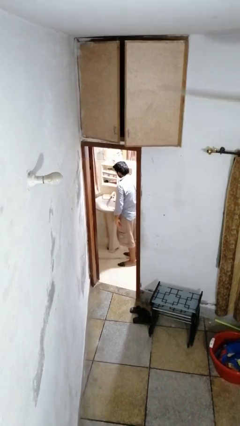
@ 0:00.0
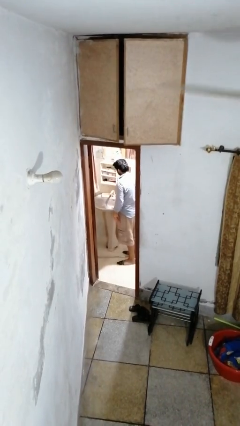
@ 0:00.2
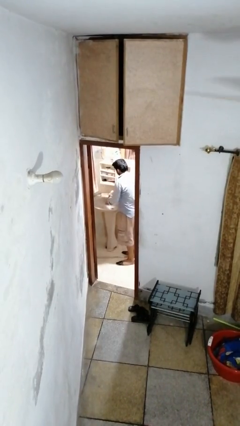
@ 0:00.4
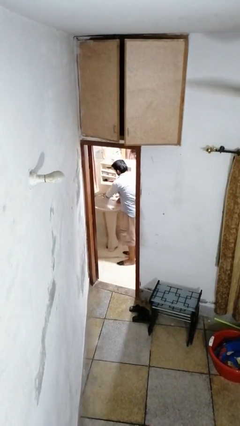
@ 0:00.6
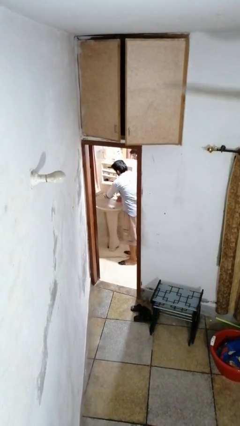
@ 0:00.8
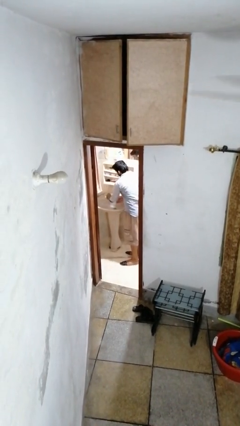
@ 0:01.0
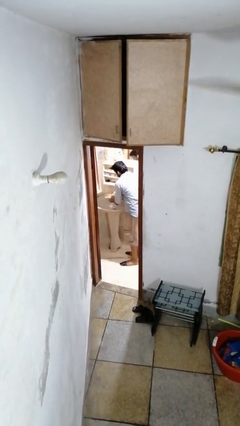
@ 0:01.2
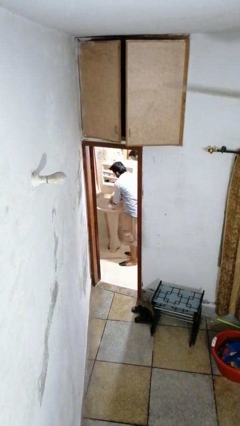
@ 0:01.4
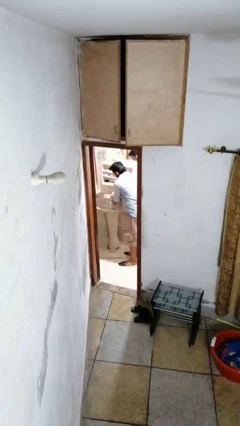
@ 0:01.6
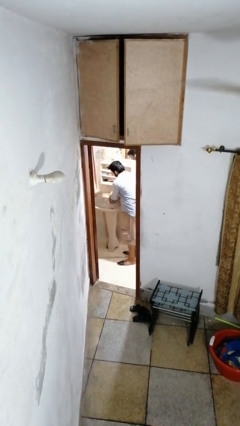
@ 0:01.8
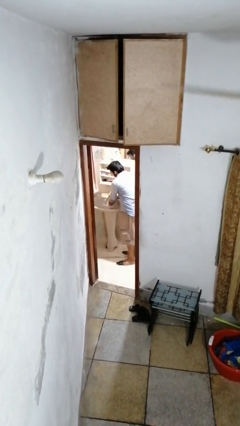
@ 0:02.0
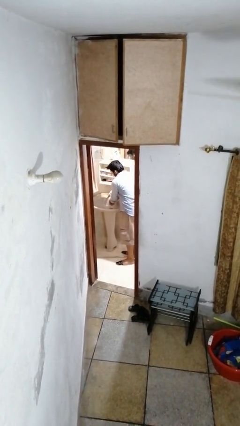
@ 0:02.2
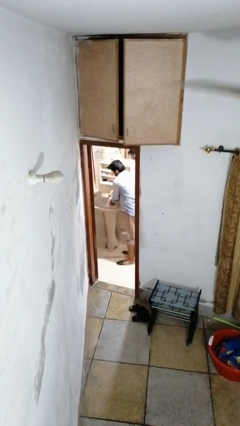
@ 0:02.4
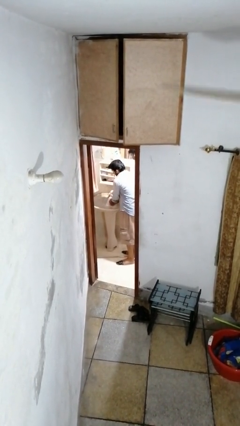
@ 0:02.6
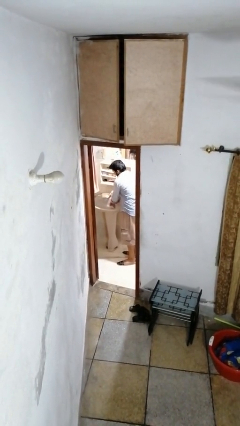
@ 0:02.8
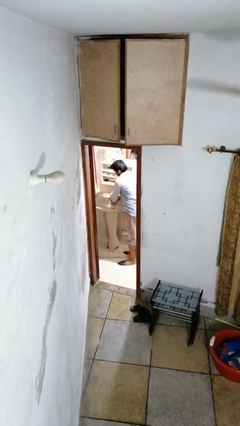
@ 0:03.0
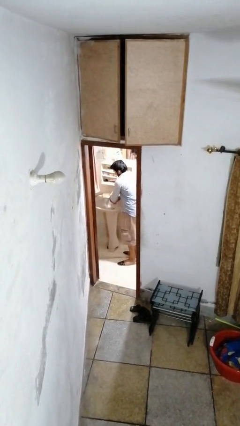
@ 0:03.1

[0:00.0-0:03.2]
person washes hands

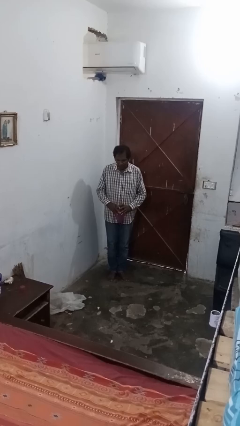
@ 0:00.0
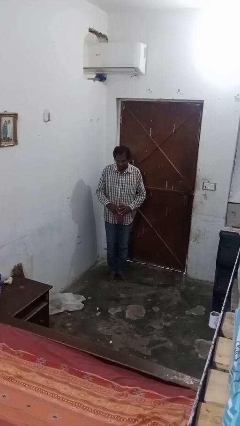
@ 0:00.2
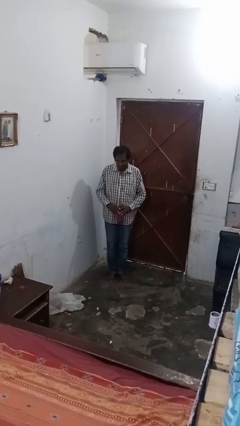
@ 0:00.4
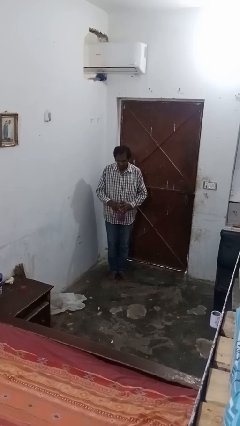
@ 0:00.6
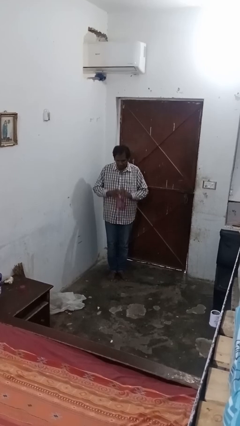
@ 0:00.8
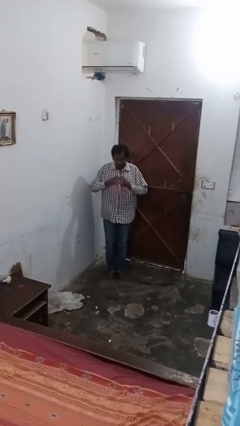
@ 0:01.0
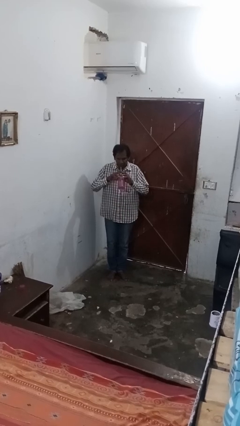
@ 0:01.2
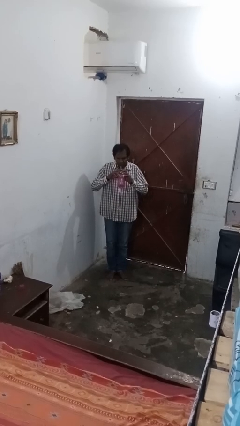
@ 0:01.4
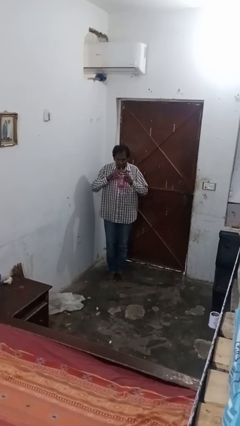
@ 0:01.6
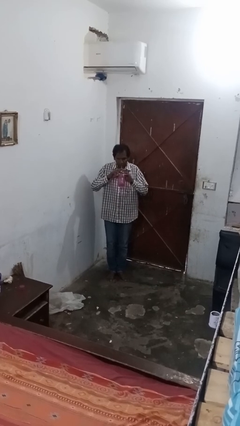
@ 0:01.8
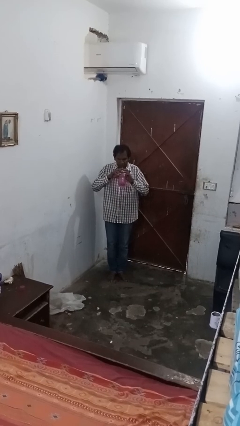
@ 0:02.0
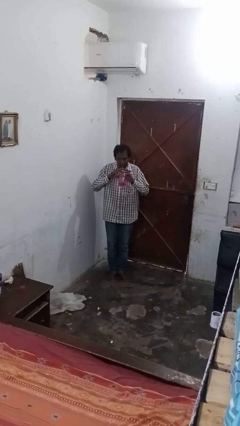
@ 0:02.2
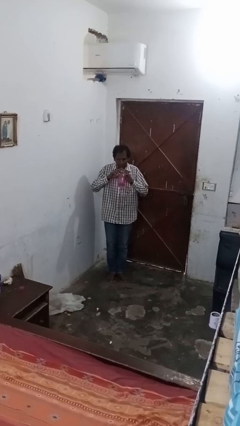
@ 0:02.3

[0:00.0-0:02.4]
person drinks from straw

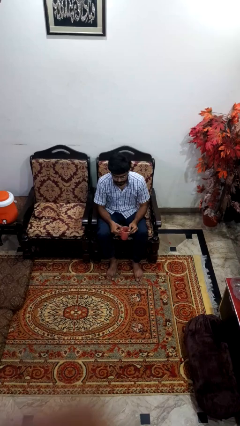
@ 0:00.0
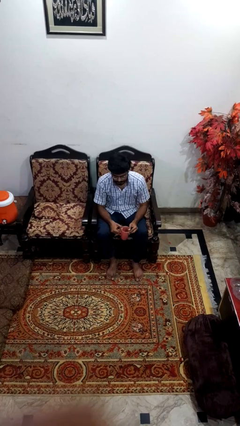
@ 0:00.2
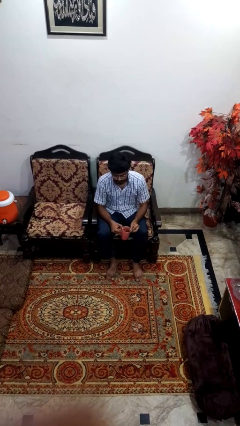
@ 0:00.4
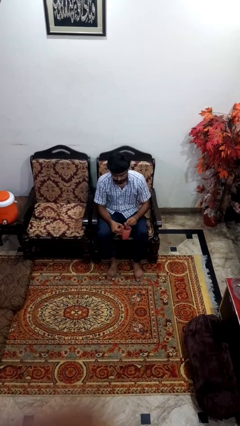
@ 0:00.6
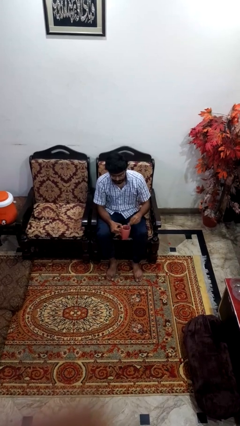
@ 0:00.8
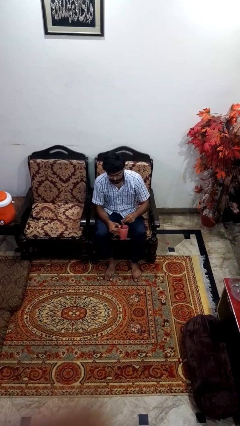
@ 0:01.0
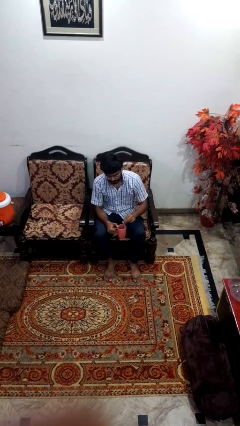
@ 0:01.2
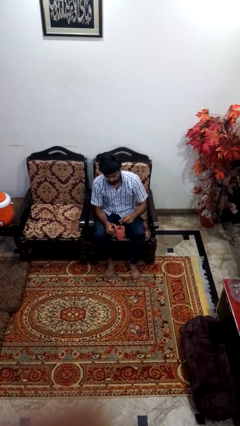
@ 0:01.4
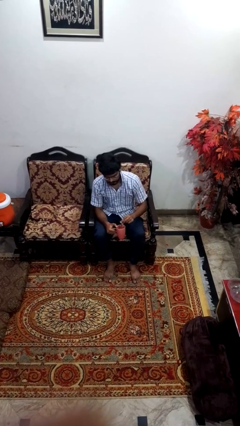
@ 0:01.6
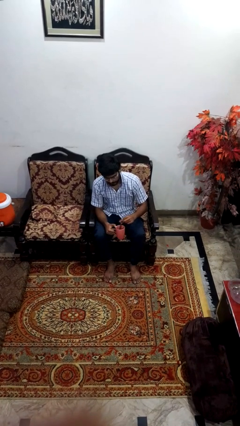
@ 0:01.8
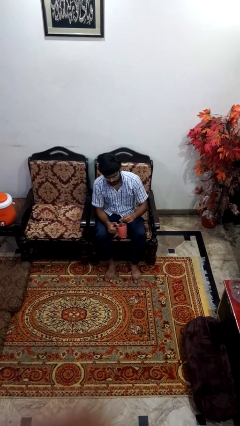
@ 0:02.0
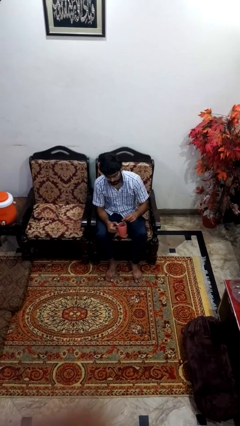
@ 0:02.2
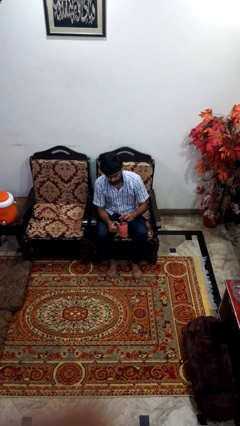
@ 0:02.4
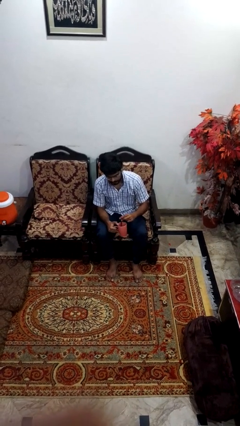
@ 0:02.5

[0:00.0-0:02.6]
person stirs mug

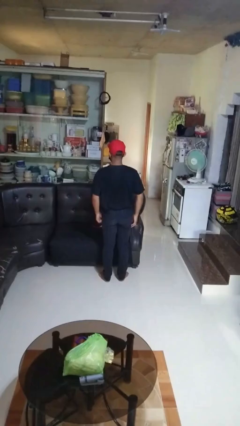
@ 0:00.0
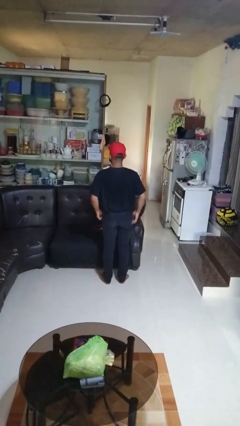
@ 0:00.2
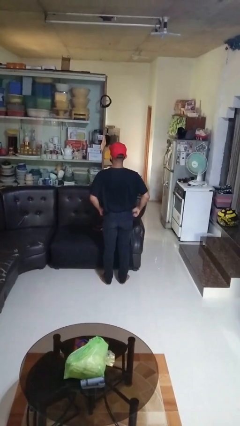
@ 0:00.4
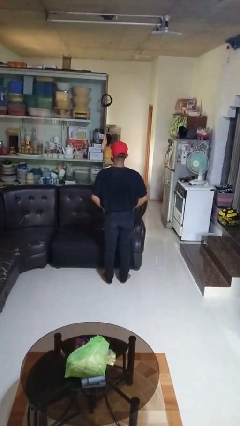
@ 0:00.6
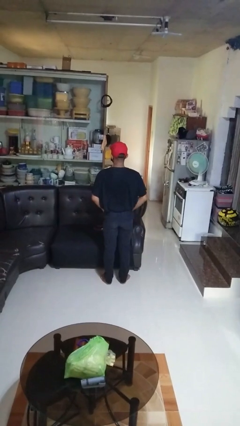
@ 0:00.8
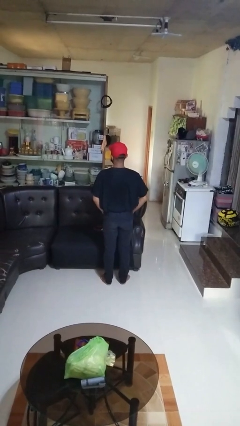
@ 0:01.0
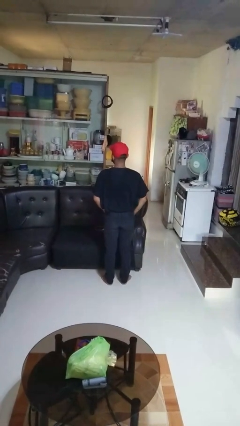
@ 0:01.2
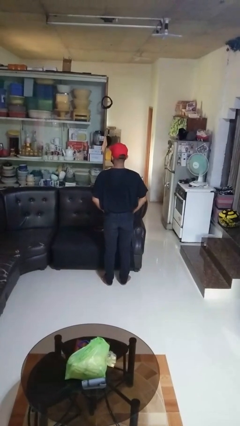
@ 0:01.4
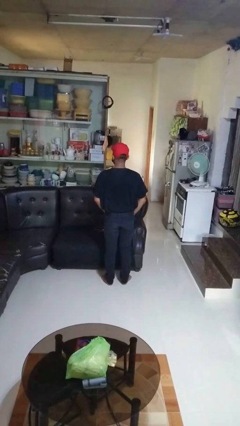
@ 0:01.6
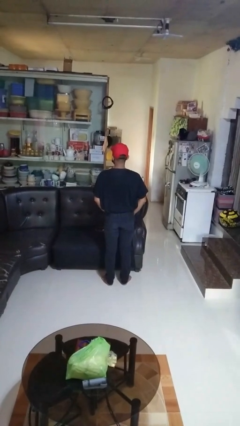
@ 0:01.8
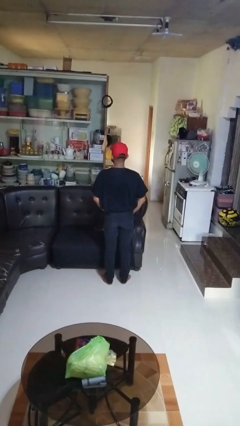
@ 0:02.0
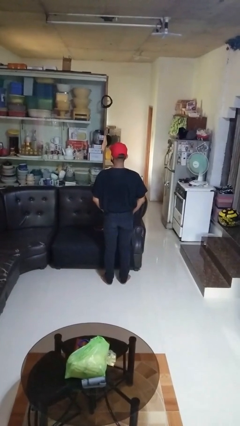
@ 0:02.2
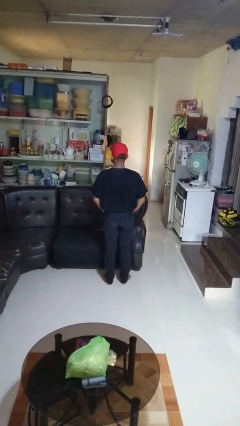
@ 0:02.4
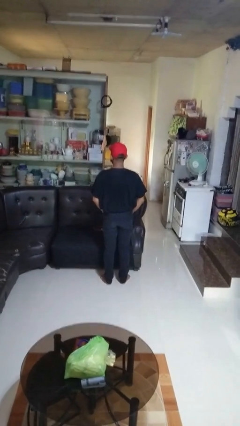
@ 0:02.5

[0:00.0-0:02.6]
person puts hands in back pockets

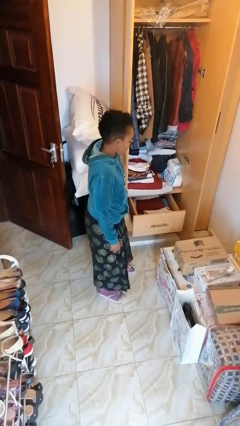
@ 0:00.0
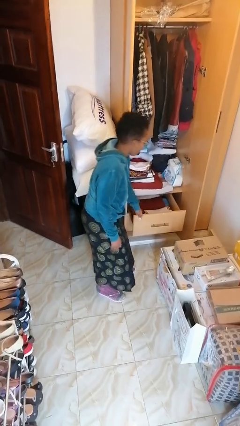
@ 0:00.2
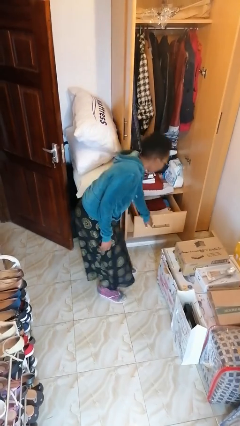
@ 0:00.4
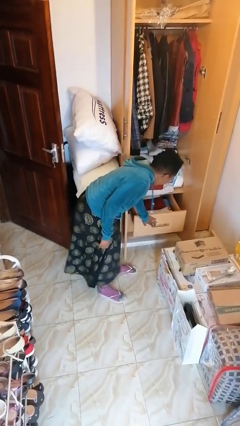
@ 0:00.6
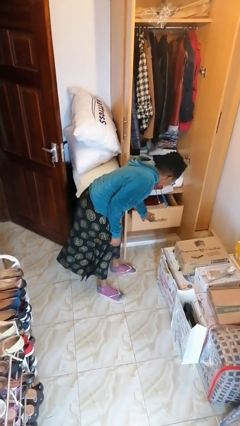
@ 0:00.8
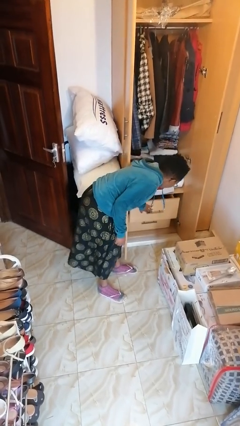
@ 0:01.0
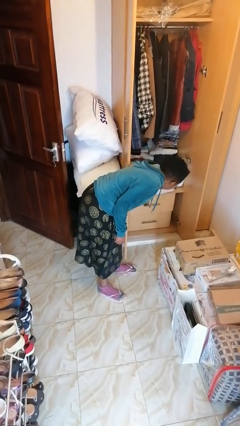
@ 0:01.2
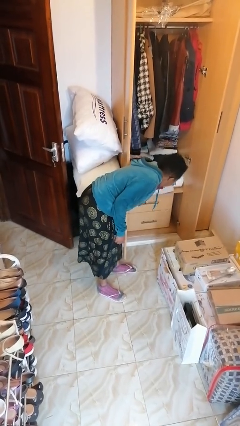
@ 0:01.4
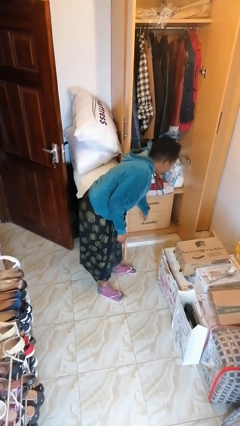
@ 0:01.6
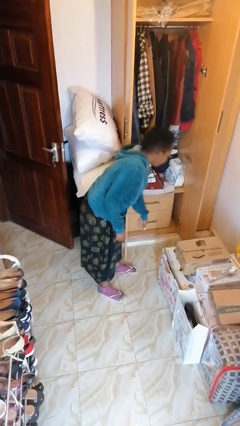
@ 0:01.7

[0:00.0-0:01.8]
person closes dresser drawer

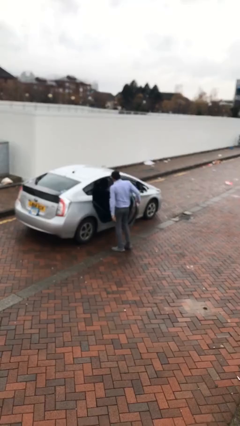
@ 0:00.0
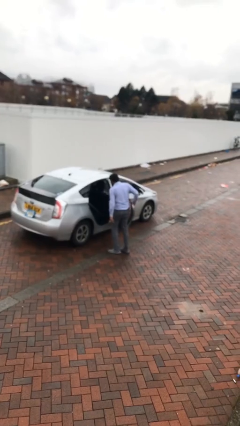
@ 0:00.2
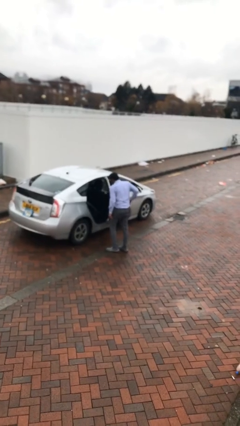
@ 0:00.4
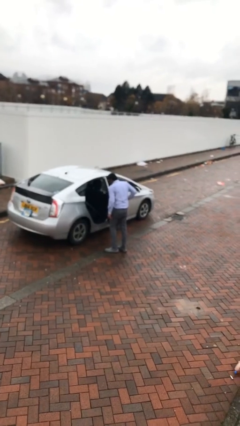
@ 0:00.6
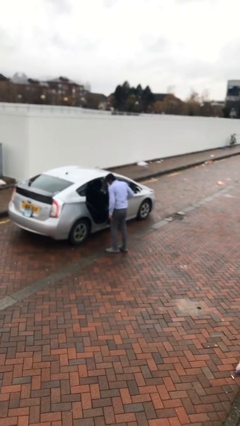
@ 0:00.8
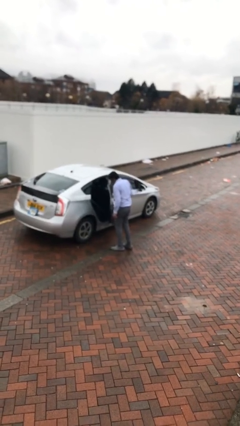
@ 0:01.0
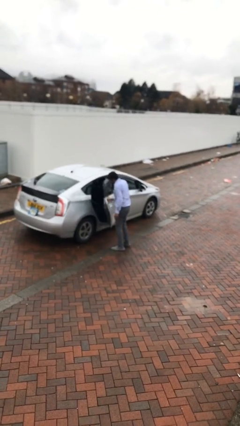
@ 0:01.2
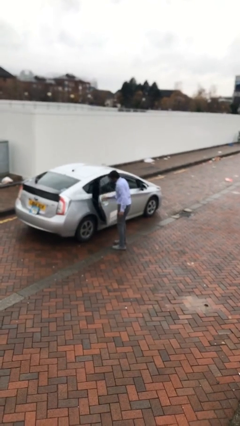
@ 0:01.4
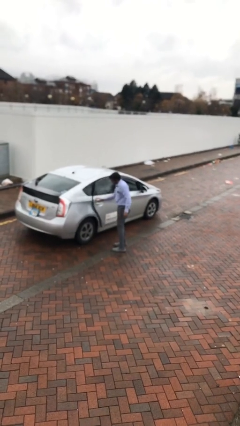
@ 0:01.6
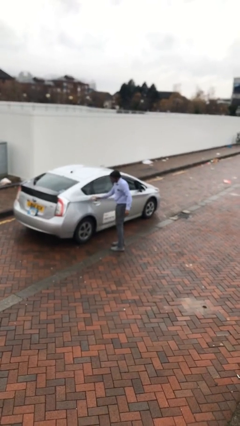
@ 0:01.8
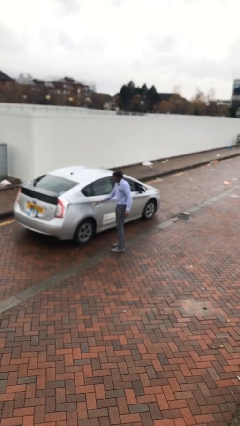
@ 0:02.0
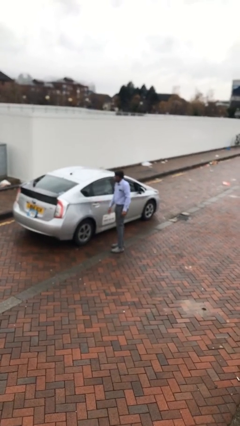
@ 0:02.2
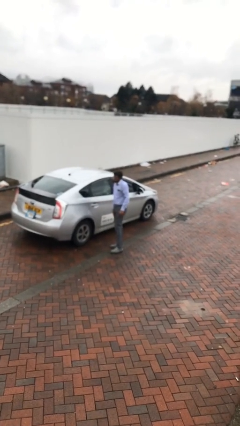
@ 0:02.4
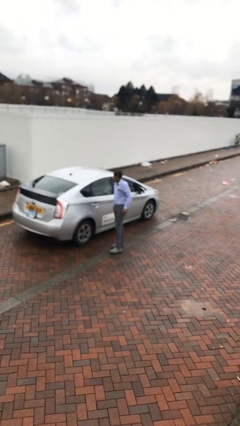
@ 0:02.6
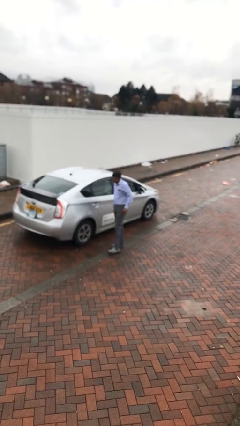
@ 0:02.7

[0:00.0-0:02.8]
person closes car door

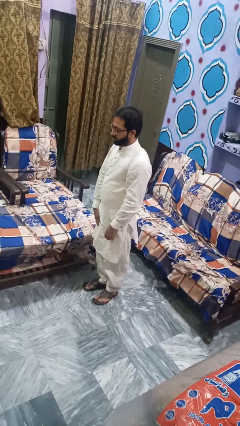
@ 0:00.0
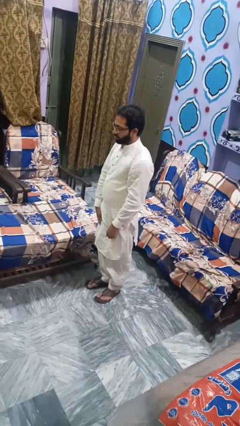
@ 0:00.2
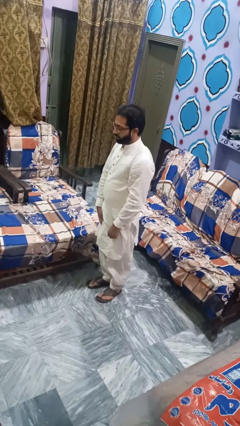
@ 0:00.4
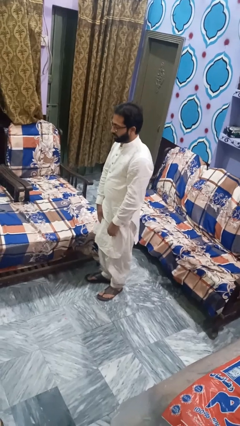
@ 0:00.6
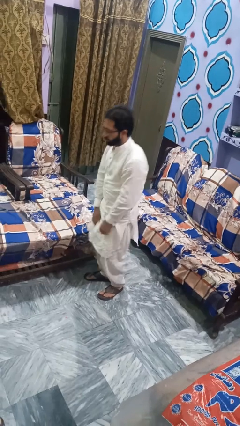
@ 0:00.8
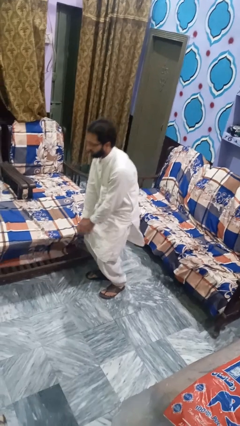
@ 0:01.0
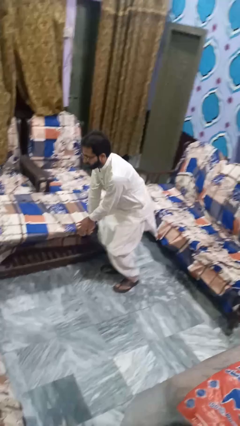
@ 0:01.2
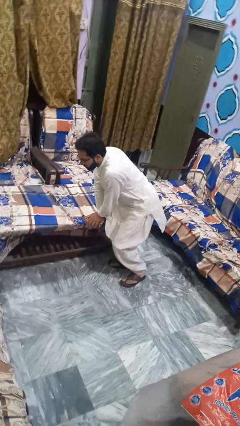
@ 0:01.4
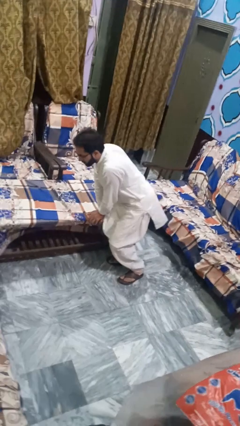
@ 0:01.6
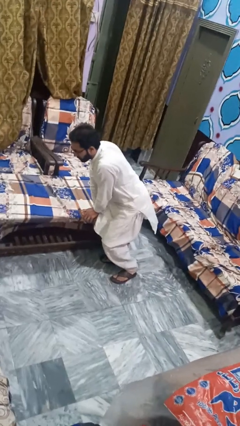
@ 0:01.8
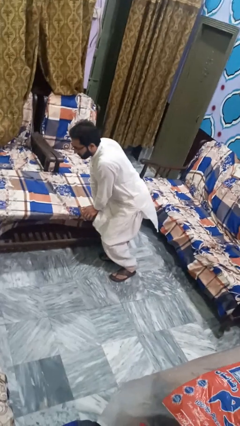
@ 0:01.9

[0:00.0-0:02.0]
person trips on object on floor
